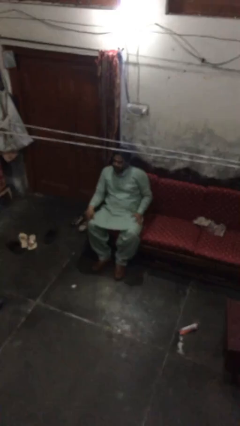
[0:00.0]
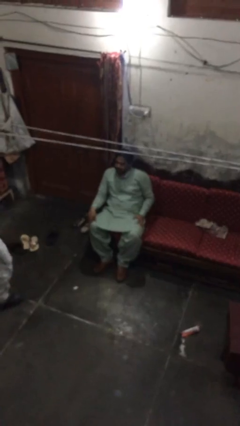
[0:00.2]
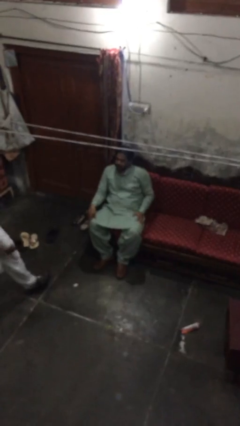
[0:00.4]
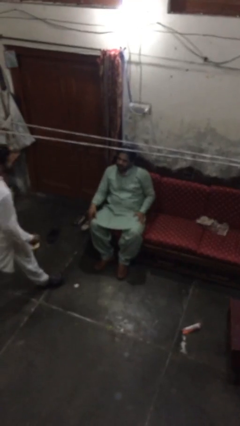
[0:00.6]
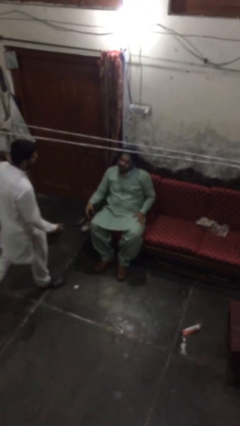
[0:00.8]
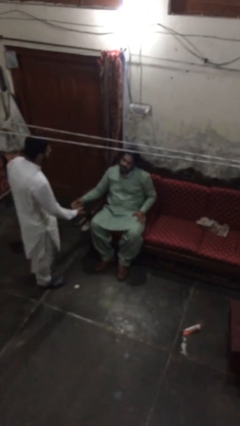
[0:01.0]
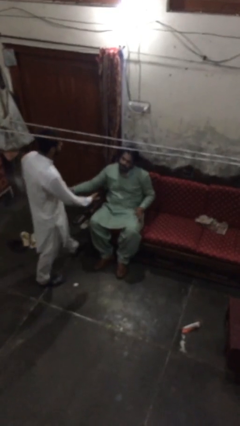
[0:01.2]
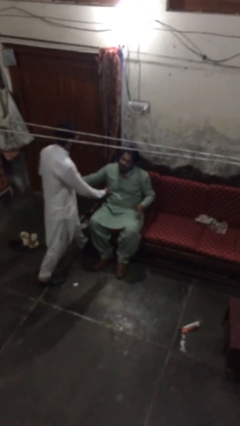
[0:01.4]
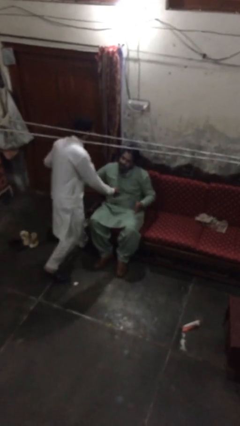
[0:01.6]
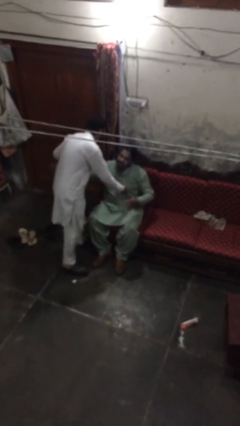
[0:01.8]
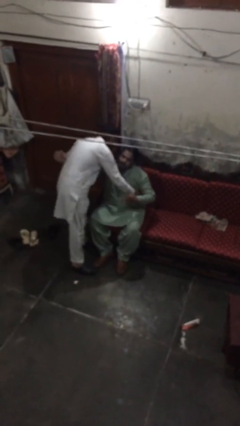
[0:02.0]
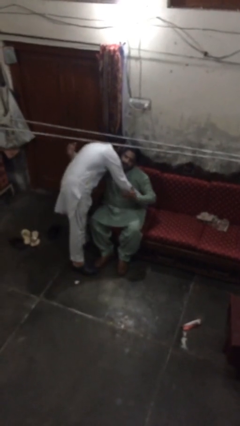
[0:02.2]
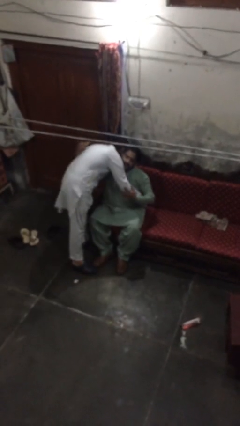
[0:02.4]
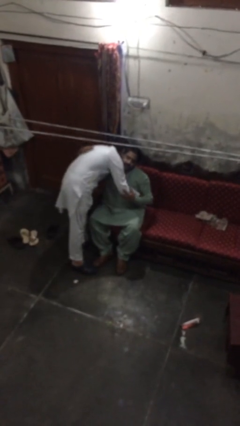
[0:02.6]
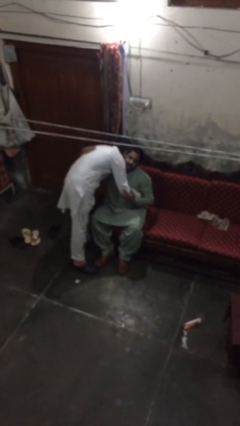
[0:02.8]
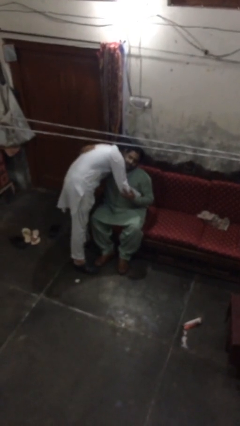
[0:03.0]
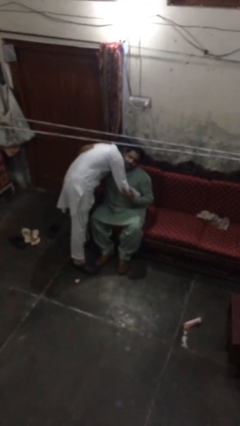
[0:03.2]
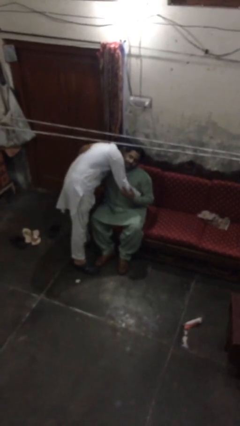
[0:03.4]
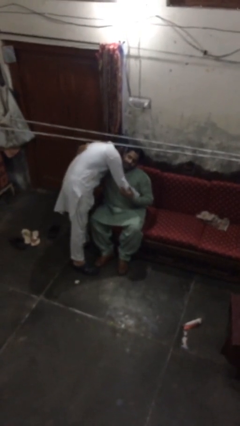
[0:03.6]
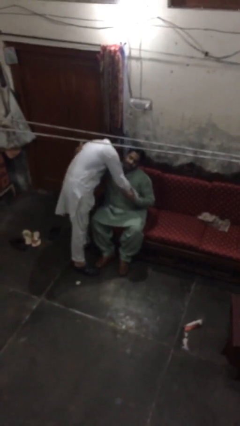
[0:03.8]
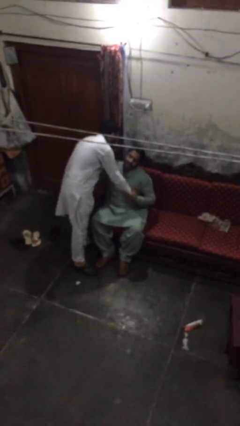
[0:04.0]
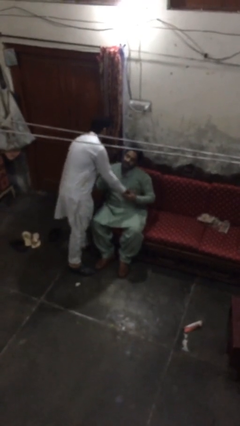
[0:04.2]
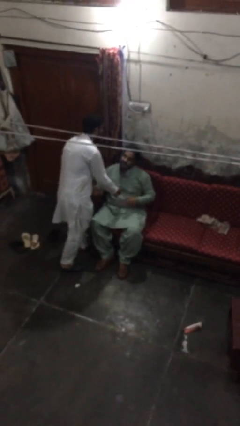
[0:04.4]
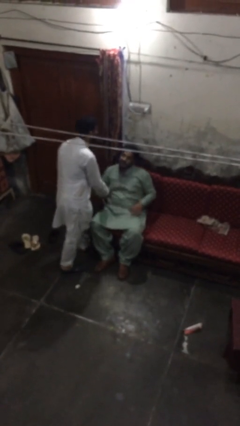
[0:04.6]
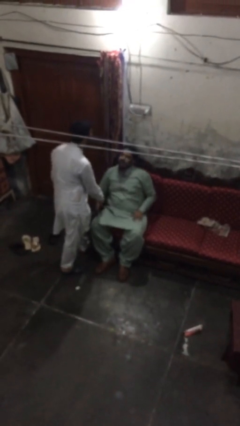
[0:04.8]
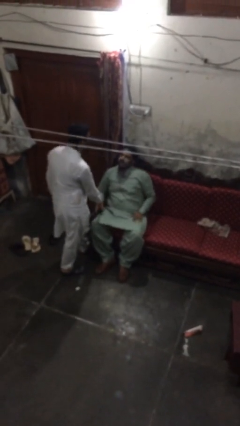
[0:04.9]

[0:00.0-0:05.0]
person embraces person

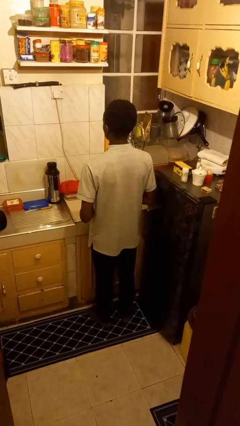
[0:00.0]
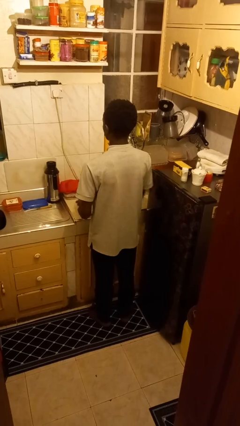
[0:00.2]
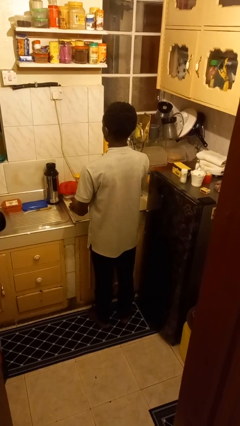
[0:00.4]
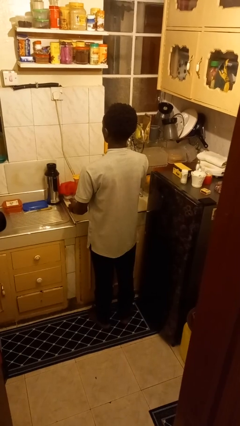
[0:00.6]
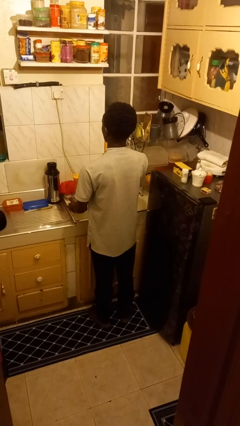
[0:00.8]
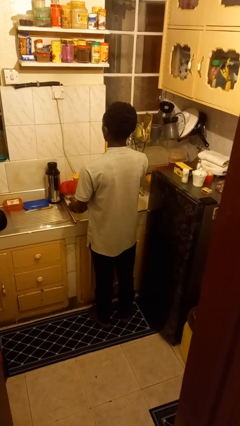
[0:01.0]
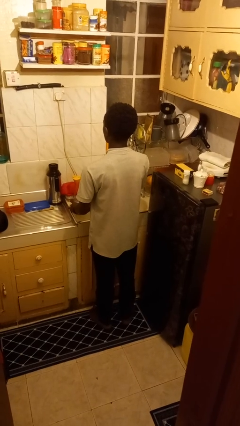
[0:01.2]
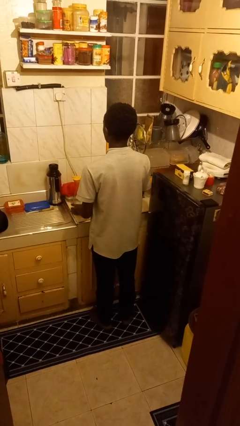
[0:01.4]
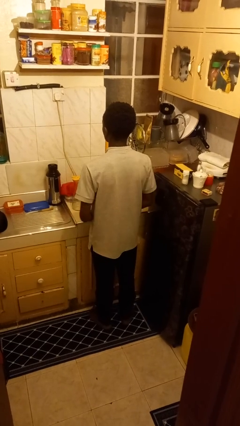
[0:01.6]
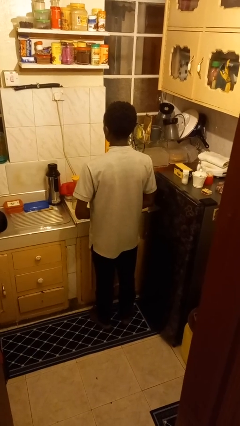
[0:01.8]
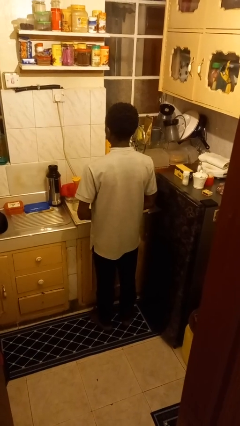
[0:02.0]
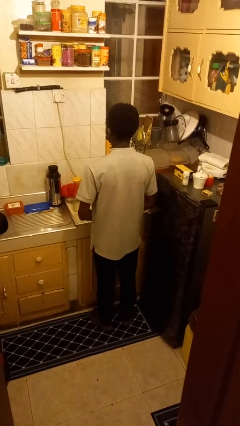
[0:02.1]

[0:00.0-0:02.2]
person puts down object on countertop

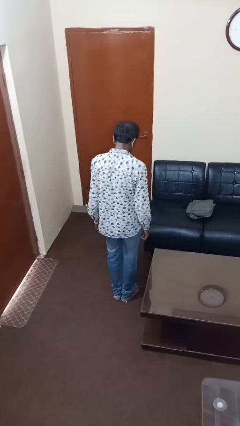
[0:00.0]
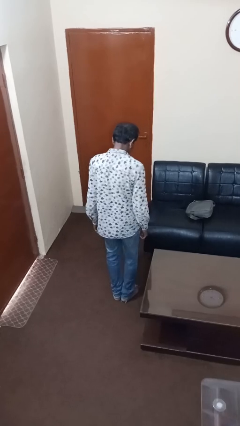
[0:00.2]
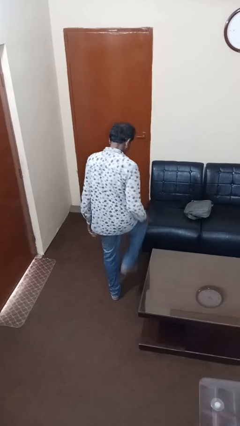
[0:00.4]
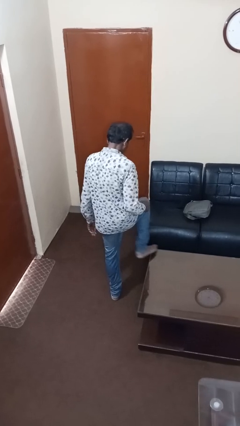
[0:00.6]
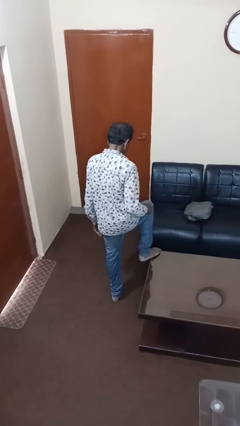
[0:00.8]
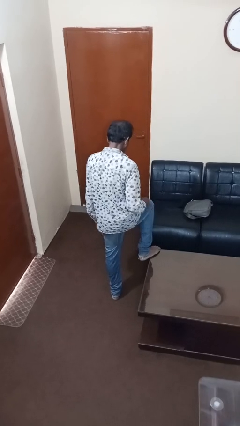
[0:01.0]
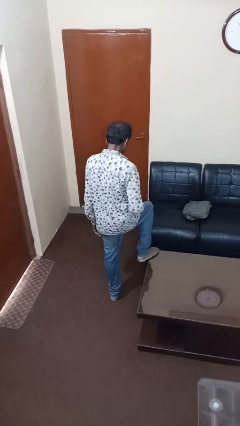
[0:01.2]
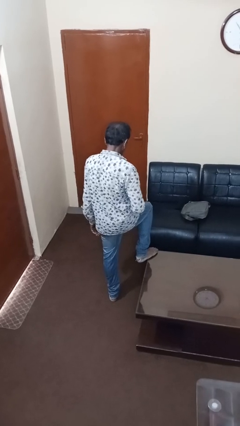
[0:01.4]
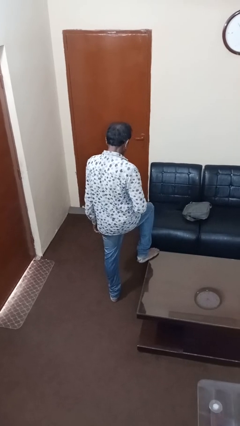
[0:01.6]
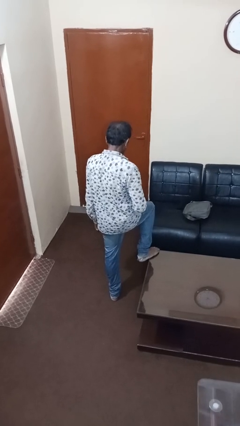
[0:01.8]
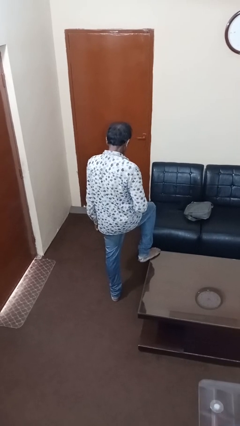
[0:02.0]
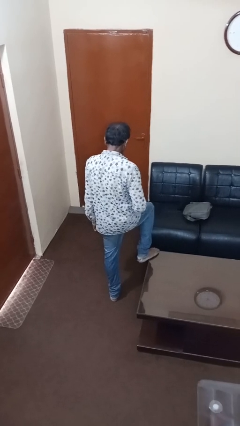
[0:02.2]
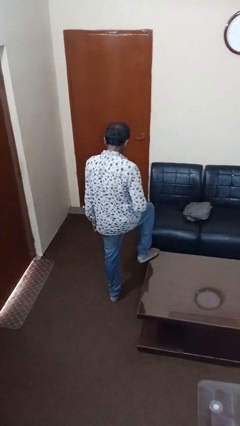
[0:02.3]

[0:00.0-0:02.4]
person puts feet up

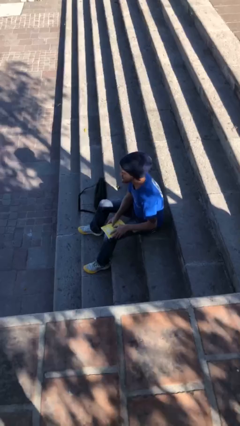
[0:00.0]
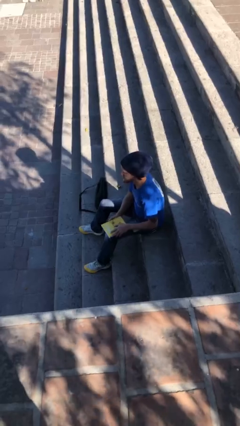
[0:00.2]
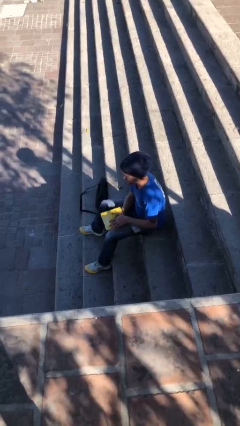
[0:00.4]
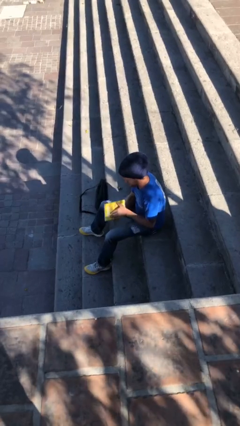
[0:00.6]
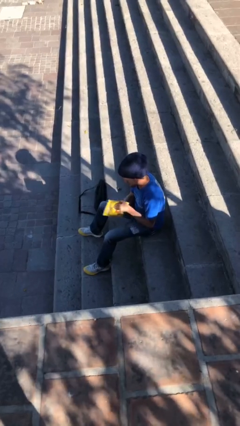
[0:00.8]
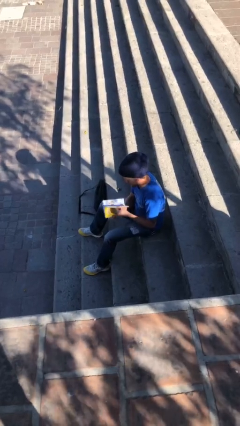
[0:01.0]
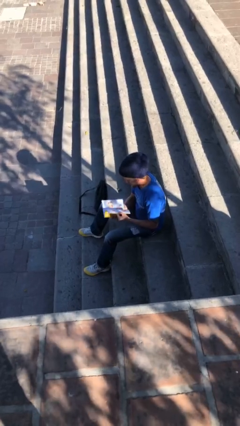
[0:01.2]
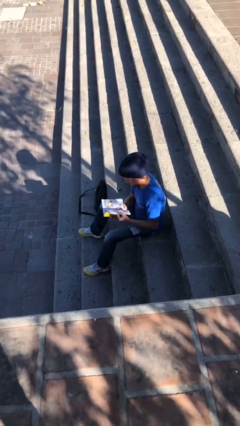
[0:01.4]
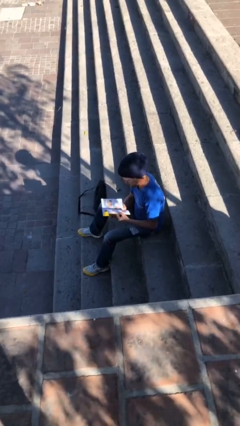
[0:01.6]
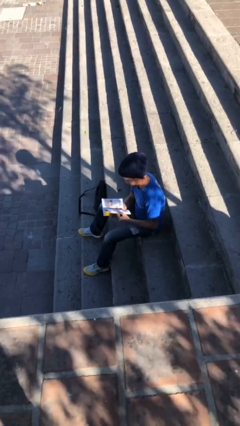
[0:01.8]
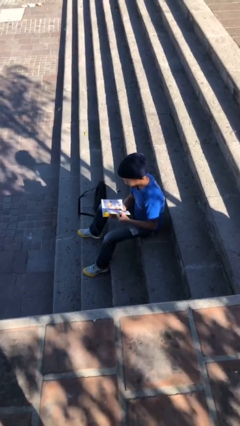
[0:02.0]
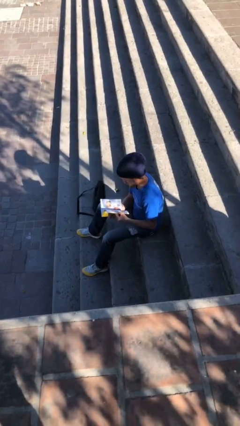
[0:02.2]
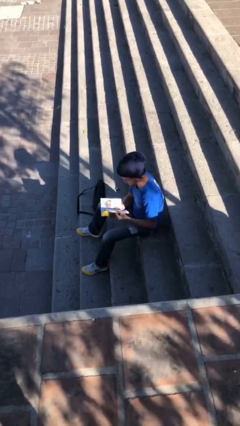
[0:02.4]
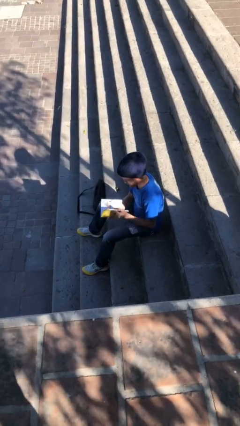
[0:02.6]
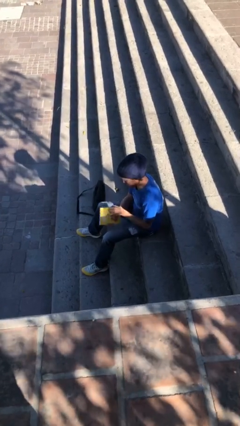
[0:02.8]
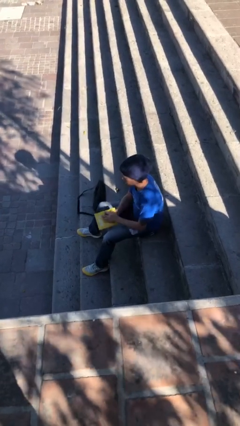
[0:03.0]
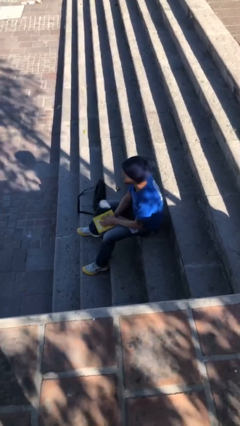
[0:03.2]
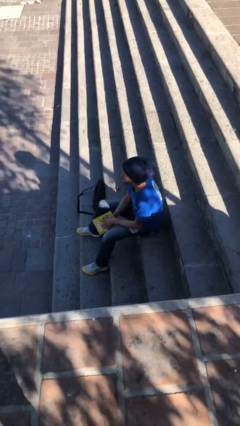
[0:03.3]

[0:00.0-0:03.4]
person reads document

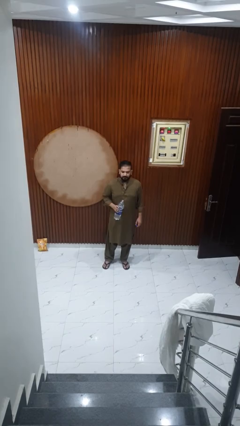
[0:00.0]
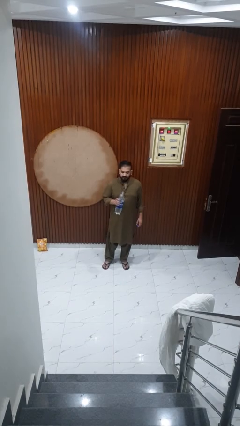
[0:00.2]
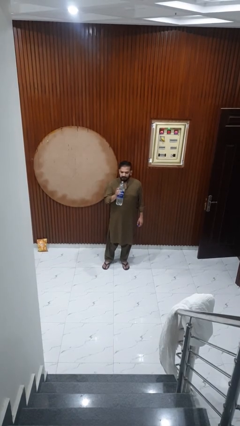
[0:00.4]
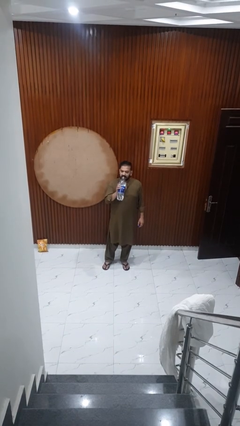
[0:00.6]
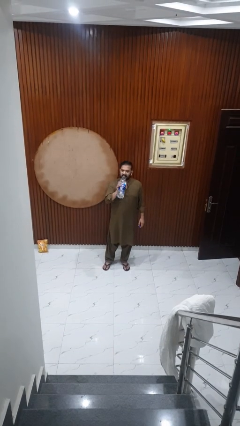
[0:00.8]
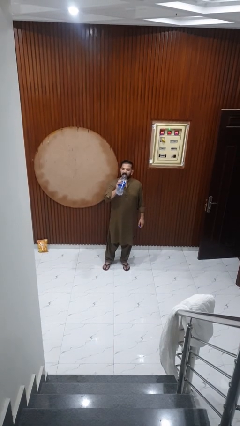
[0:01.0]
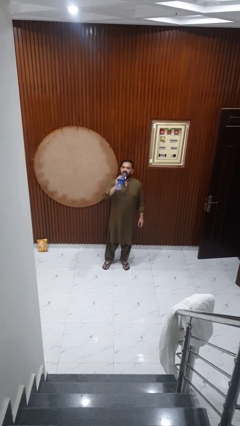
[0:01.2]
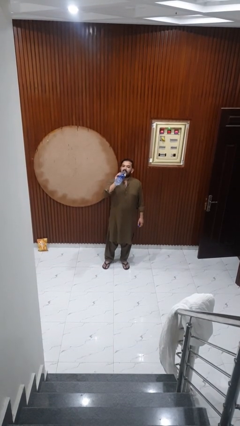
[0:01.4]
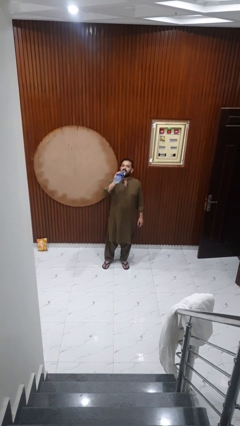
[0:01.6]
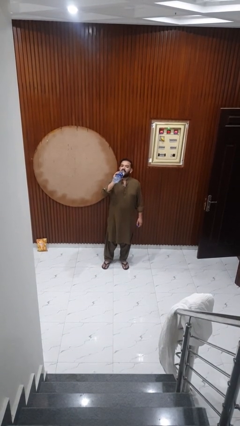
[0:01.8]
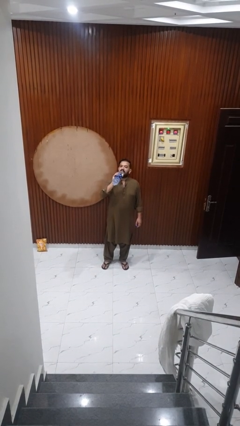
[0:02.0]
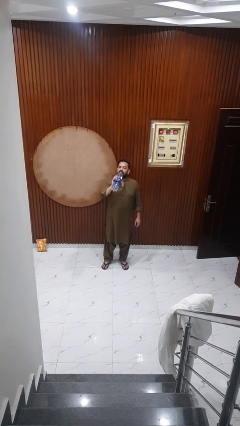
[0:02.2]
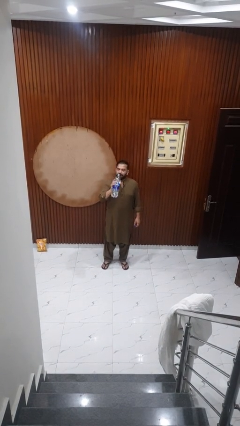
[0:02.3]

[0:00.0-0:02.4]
person drinks from bottle

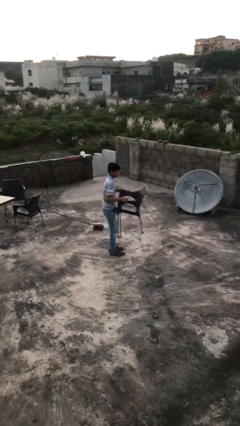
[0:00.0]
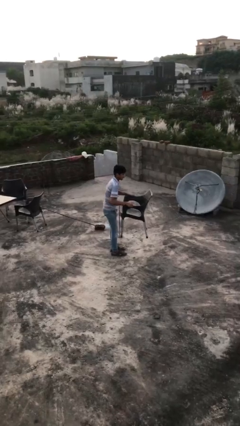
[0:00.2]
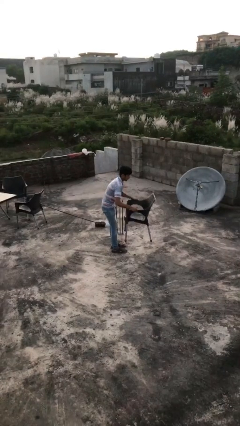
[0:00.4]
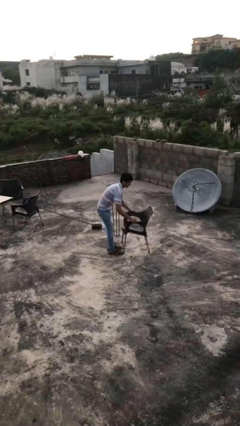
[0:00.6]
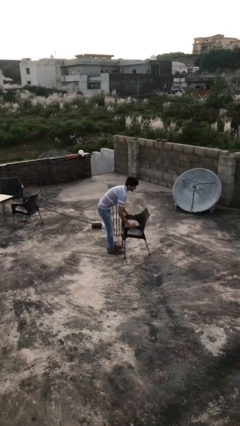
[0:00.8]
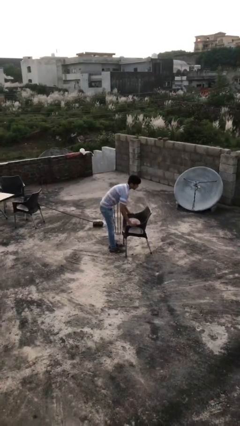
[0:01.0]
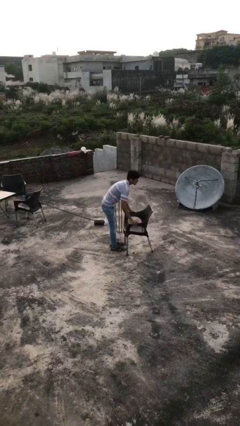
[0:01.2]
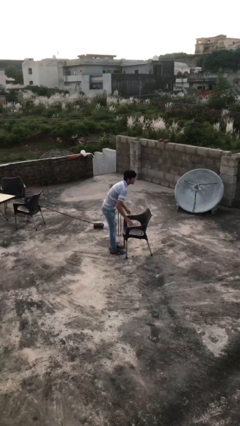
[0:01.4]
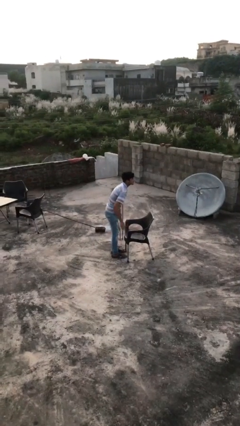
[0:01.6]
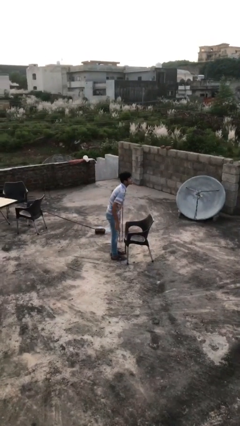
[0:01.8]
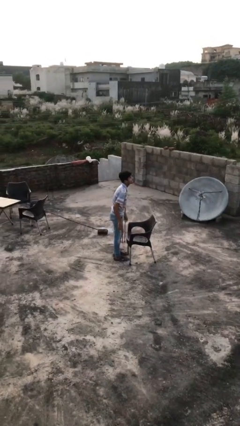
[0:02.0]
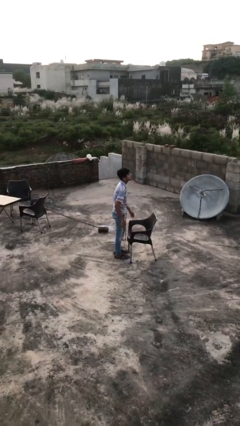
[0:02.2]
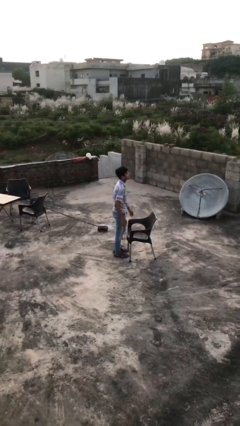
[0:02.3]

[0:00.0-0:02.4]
person puts down object on floor
